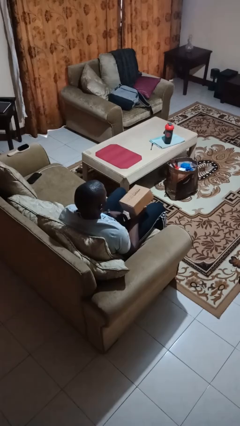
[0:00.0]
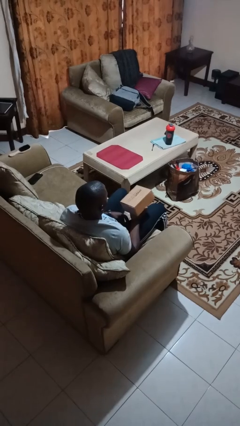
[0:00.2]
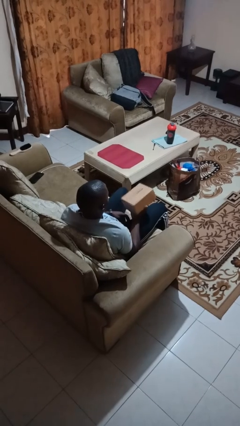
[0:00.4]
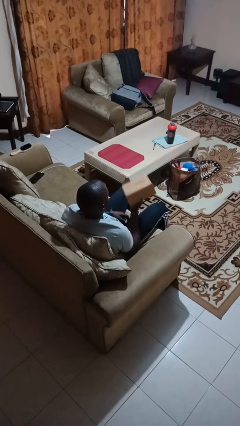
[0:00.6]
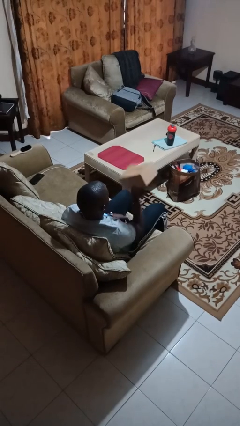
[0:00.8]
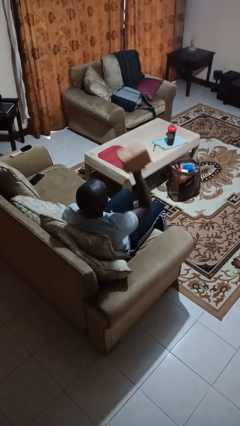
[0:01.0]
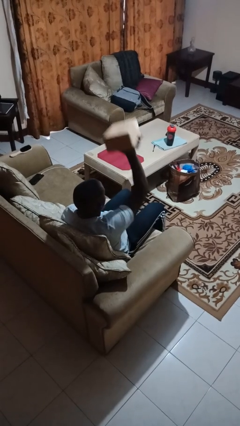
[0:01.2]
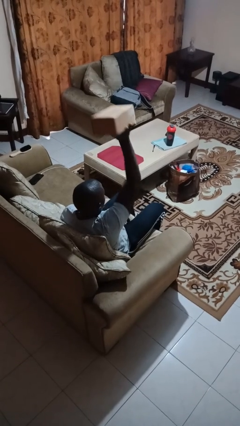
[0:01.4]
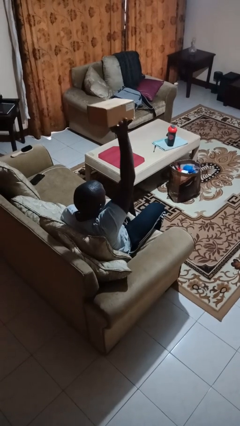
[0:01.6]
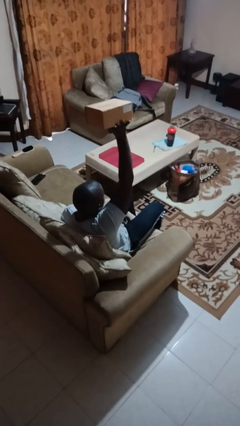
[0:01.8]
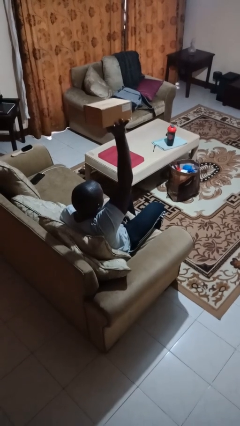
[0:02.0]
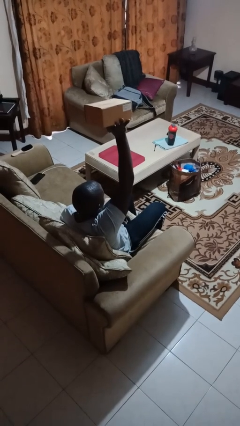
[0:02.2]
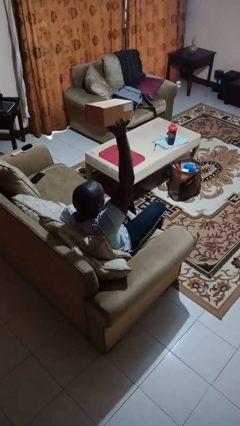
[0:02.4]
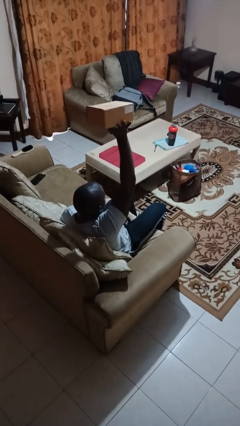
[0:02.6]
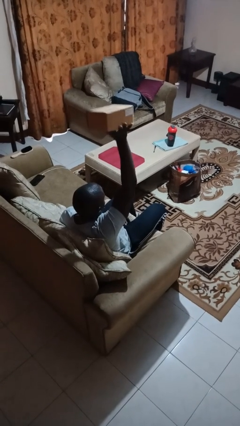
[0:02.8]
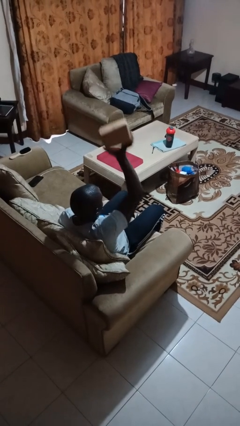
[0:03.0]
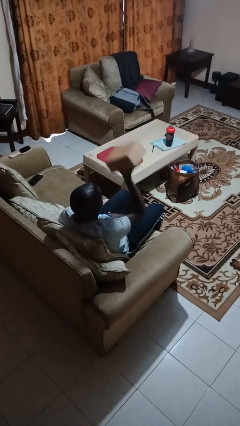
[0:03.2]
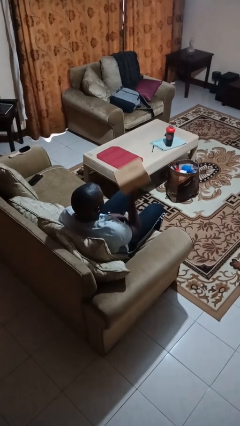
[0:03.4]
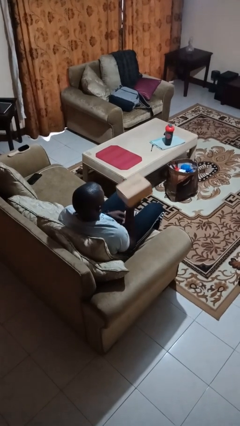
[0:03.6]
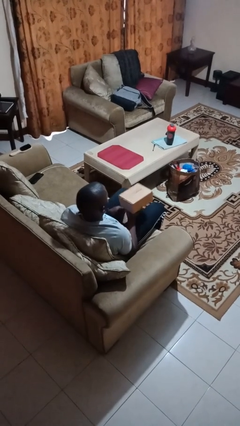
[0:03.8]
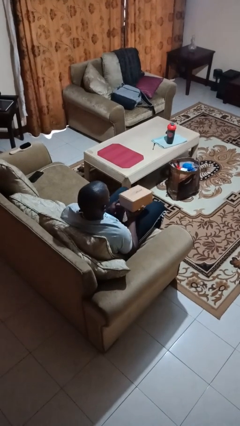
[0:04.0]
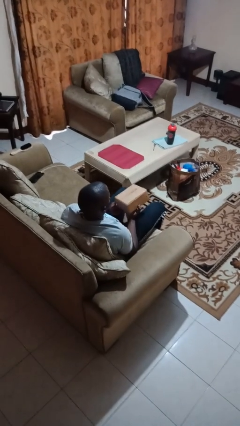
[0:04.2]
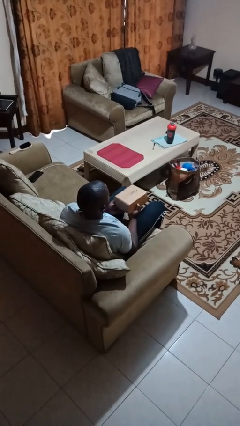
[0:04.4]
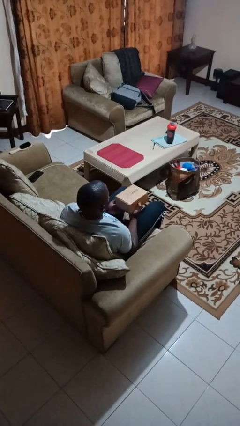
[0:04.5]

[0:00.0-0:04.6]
person holds object above head

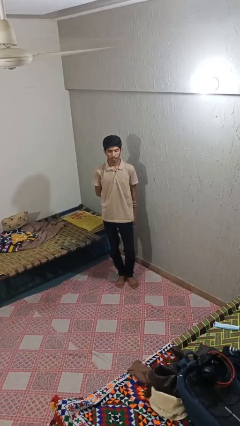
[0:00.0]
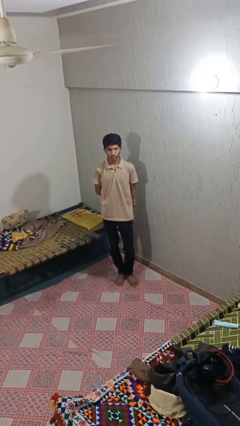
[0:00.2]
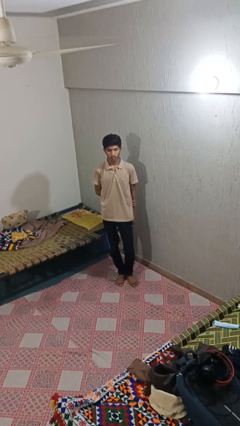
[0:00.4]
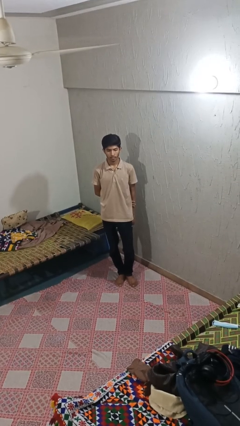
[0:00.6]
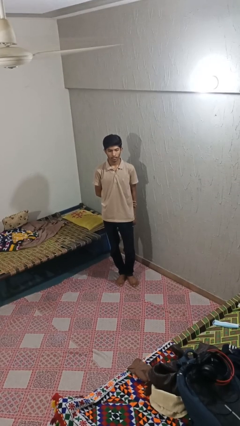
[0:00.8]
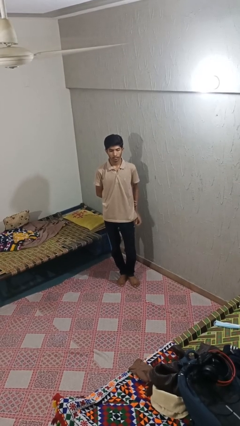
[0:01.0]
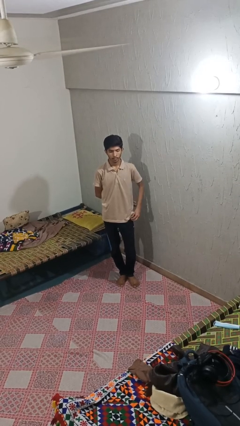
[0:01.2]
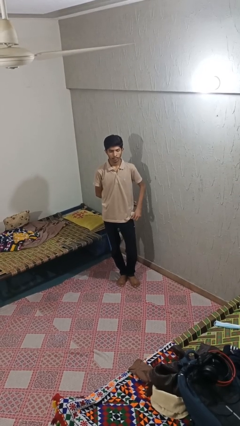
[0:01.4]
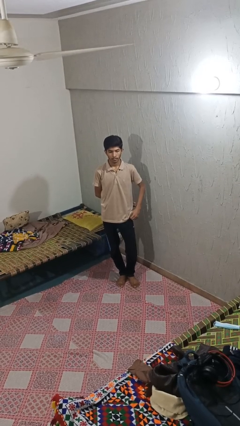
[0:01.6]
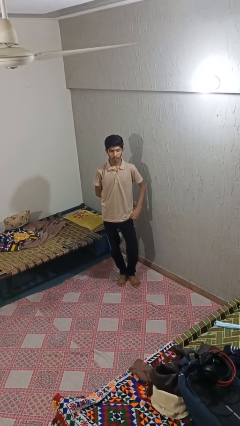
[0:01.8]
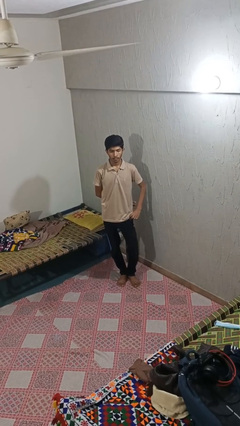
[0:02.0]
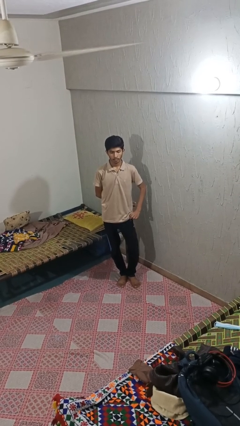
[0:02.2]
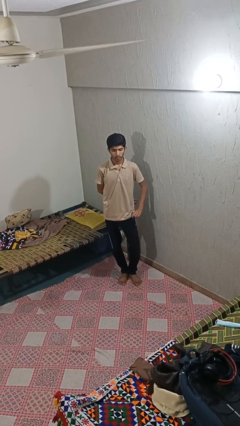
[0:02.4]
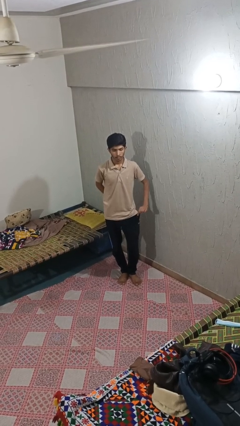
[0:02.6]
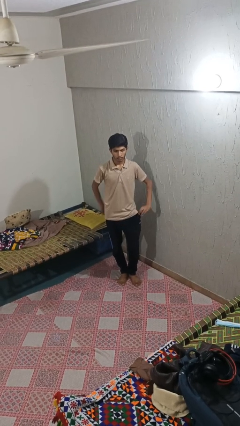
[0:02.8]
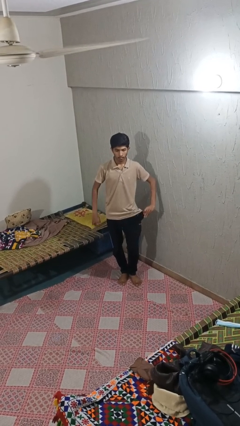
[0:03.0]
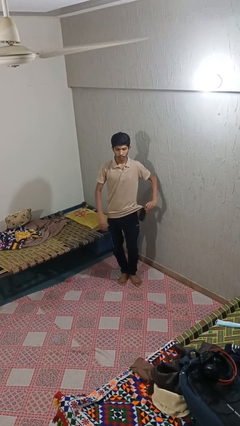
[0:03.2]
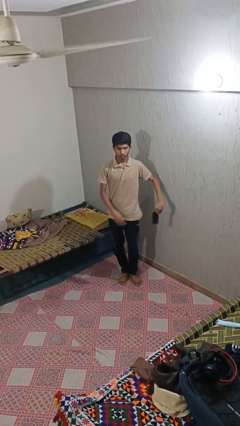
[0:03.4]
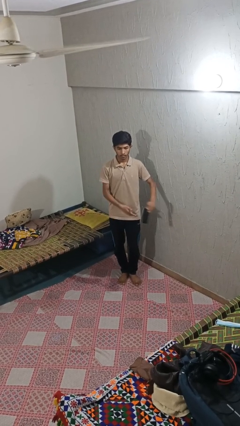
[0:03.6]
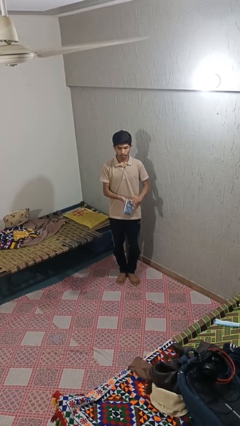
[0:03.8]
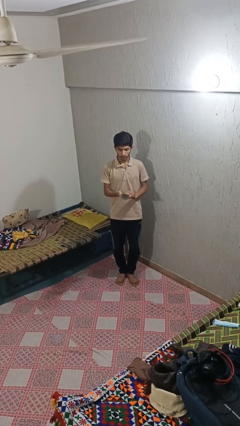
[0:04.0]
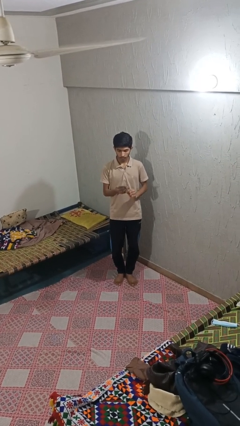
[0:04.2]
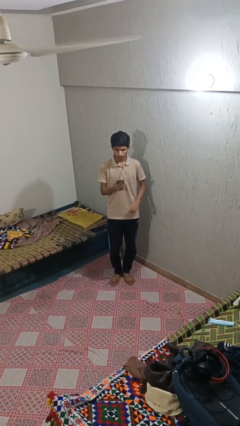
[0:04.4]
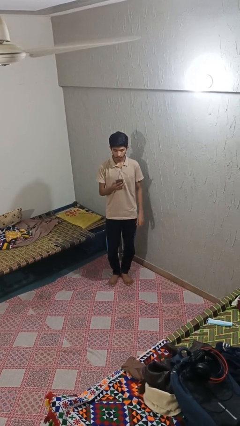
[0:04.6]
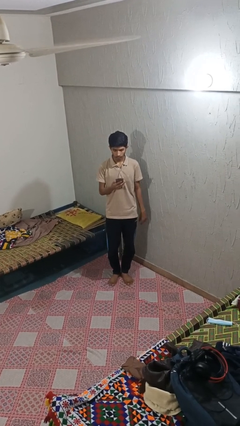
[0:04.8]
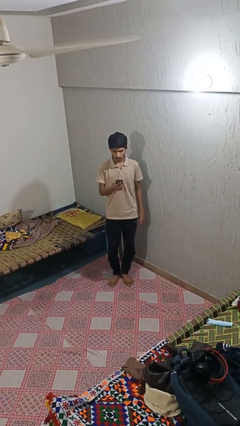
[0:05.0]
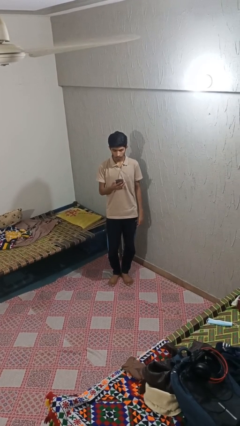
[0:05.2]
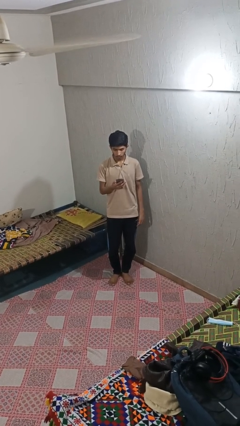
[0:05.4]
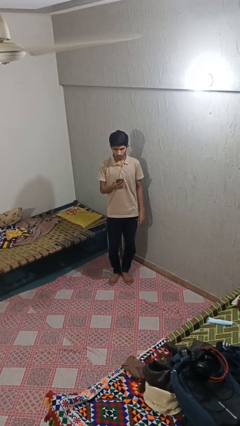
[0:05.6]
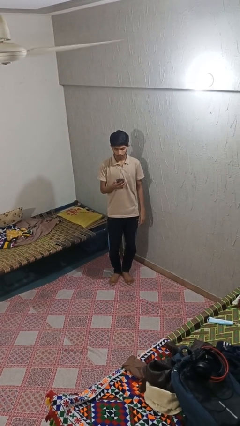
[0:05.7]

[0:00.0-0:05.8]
person takes phone from pocket

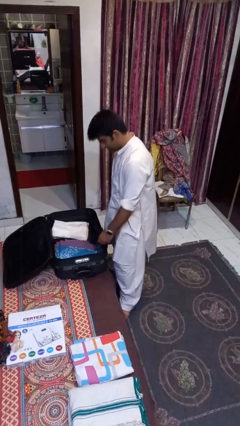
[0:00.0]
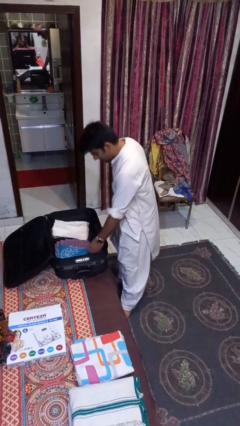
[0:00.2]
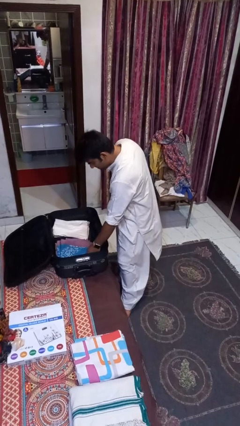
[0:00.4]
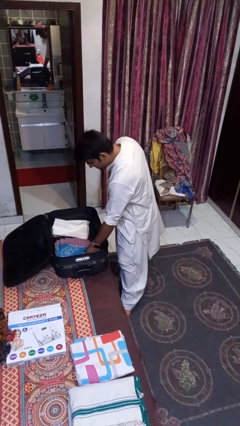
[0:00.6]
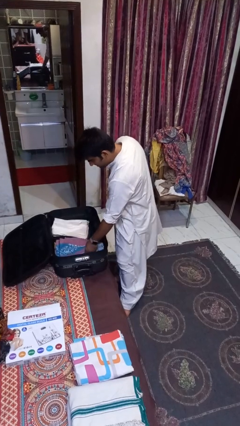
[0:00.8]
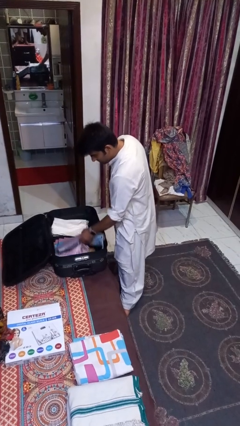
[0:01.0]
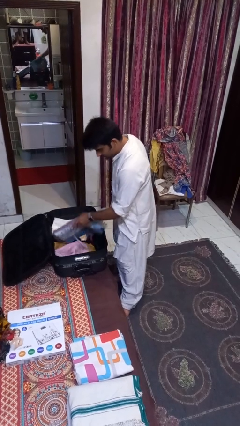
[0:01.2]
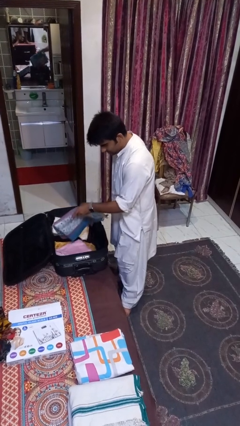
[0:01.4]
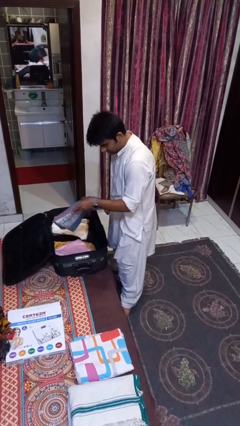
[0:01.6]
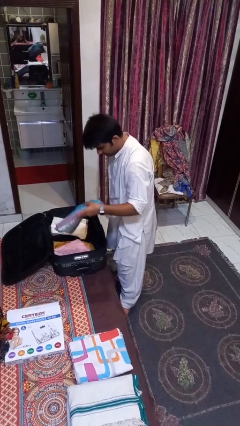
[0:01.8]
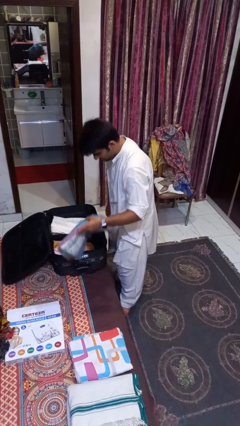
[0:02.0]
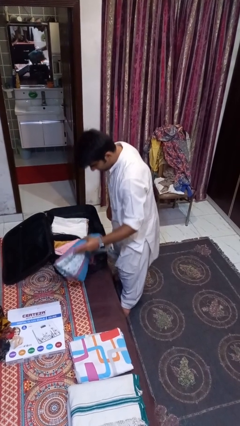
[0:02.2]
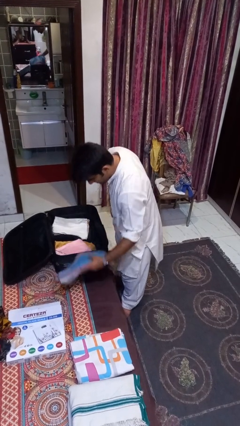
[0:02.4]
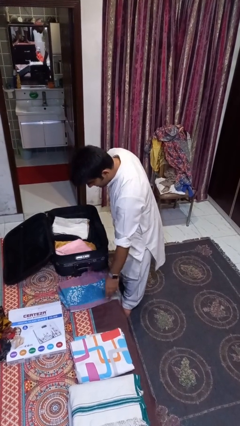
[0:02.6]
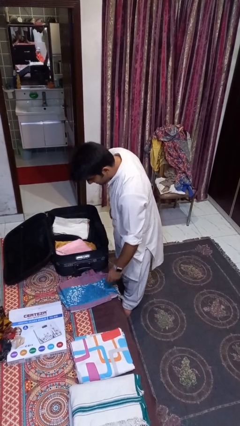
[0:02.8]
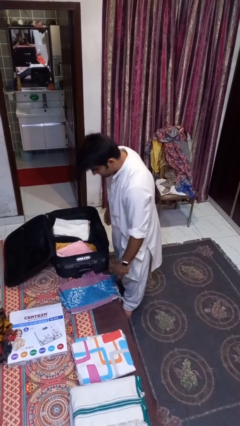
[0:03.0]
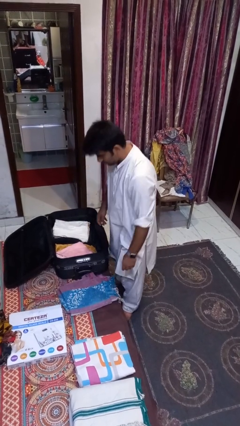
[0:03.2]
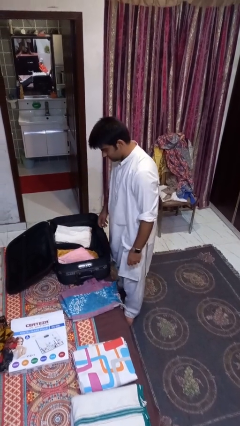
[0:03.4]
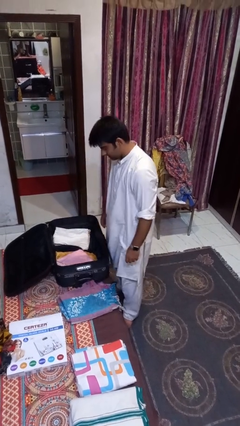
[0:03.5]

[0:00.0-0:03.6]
person unloads clothes from suitcase

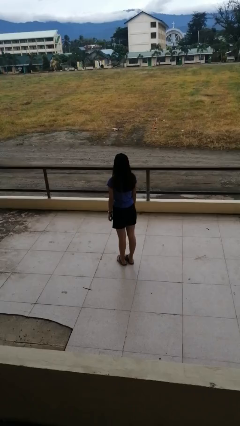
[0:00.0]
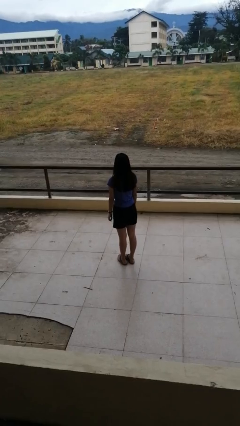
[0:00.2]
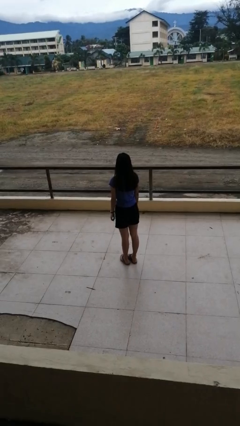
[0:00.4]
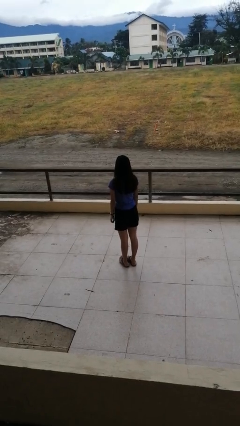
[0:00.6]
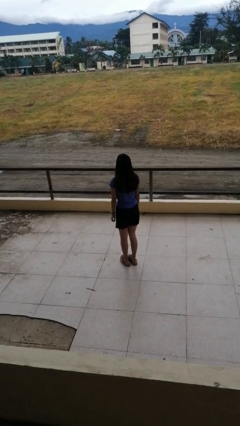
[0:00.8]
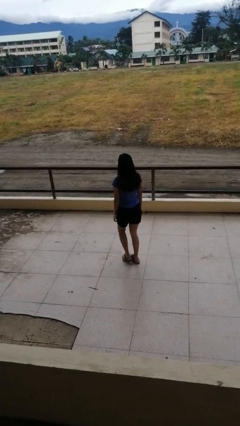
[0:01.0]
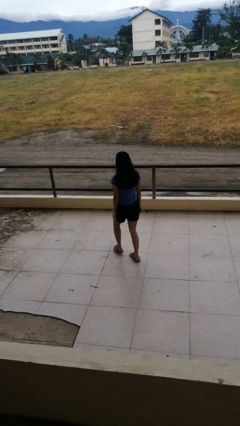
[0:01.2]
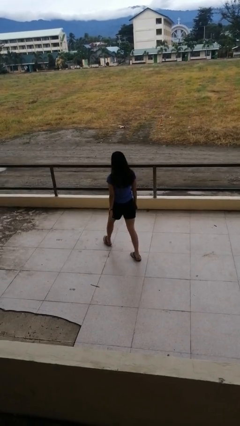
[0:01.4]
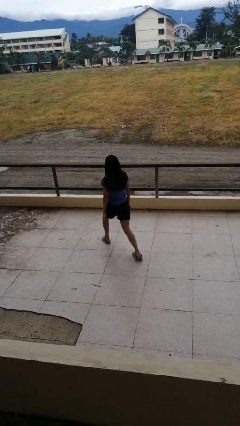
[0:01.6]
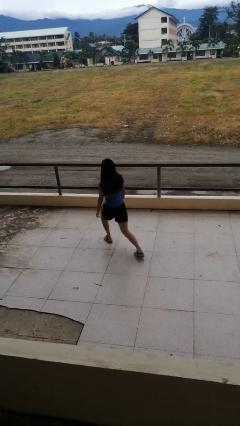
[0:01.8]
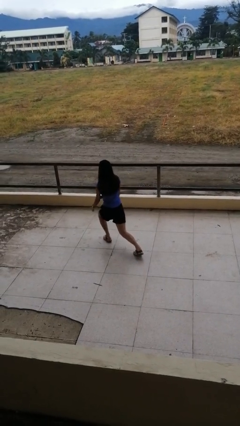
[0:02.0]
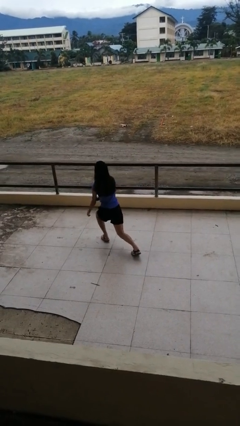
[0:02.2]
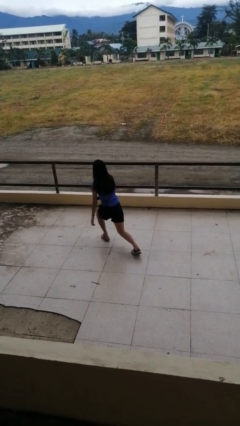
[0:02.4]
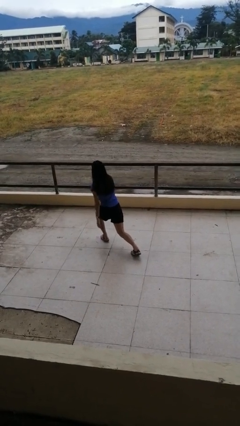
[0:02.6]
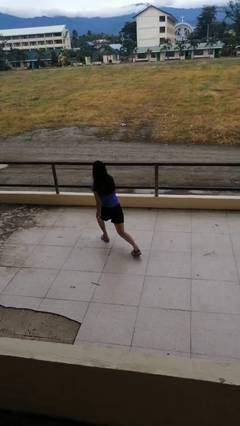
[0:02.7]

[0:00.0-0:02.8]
person exercises with lunges

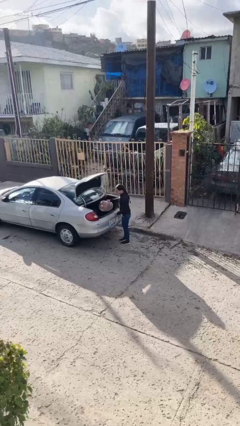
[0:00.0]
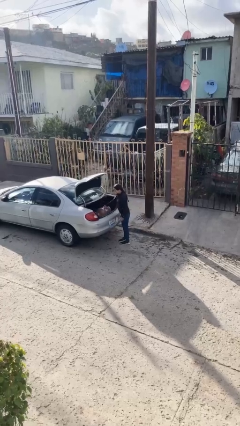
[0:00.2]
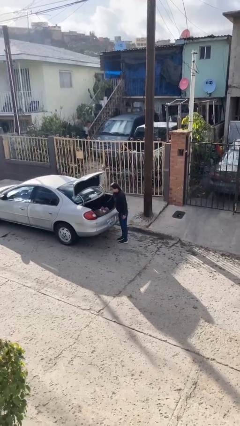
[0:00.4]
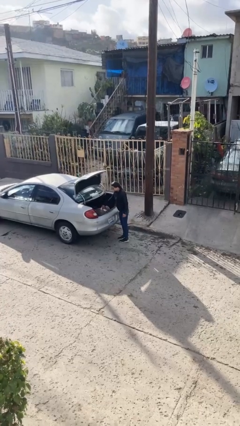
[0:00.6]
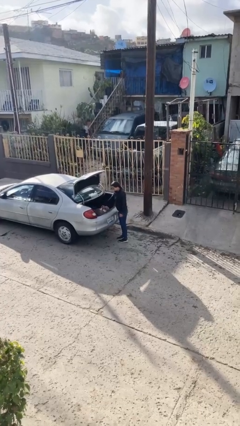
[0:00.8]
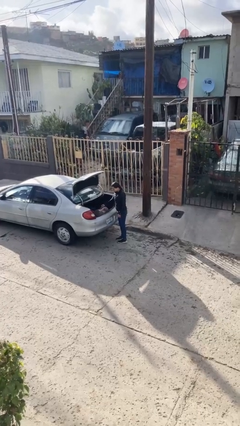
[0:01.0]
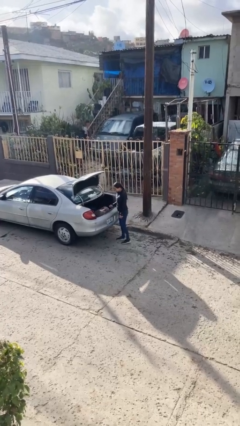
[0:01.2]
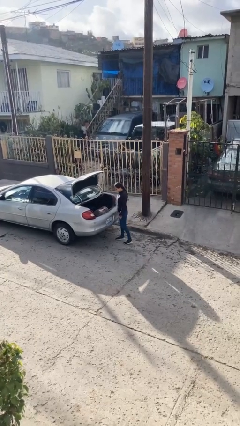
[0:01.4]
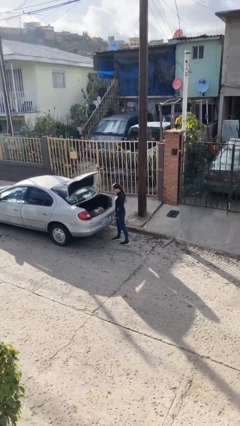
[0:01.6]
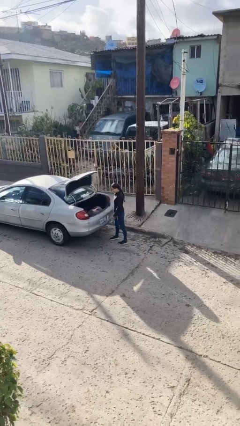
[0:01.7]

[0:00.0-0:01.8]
person loads car
